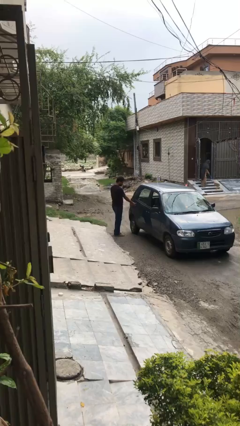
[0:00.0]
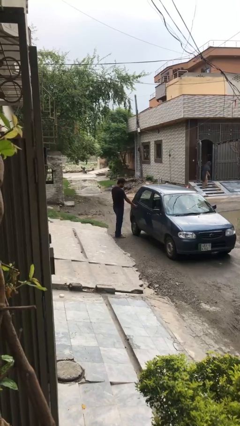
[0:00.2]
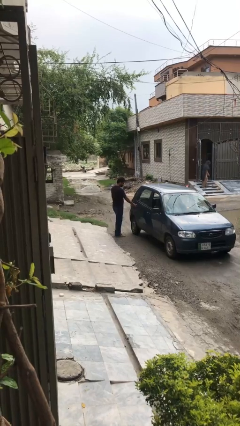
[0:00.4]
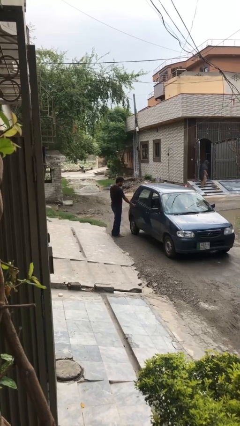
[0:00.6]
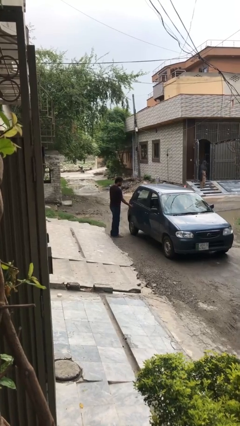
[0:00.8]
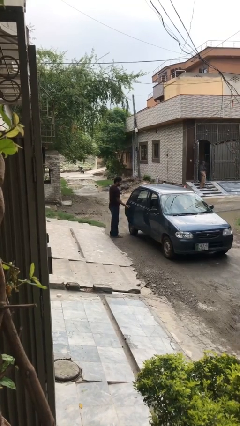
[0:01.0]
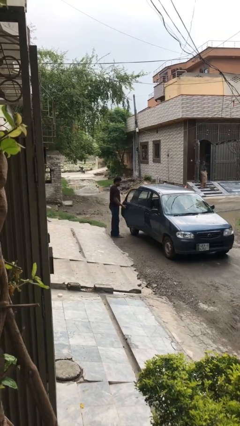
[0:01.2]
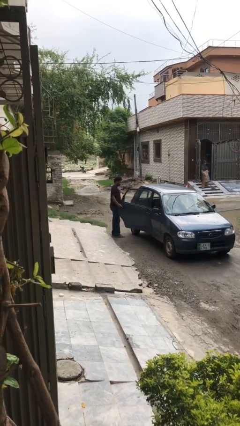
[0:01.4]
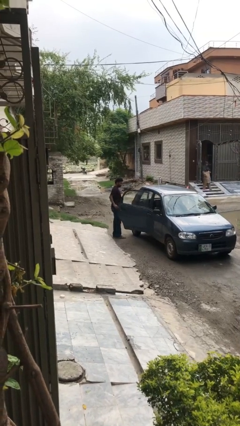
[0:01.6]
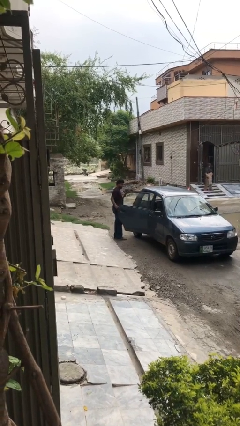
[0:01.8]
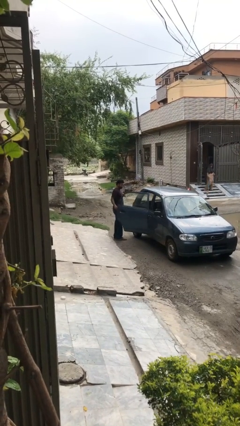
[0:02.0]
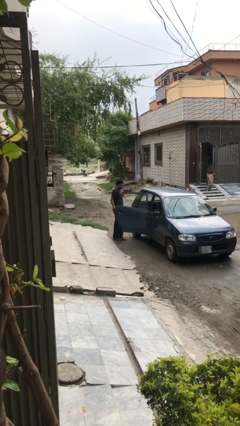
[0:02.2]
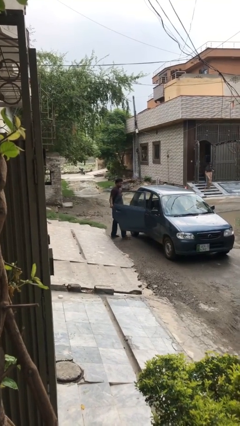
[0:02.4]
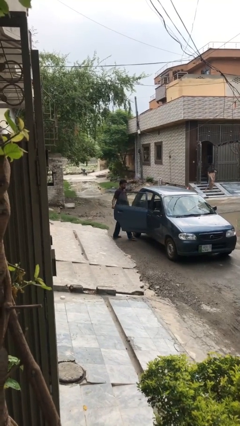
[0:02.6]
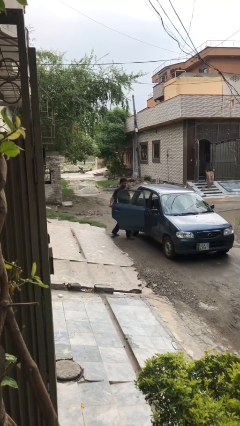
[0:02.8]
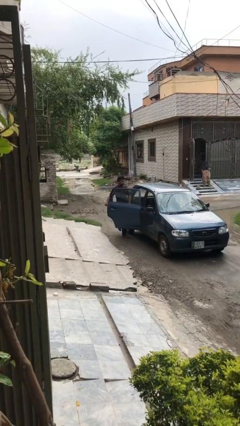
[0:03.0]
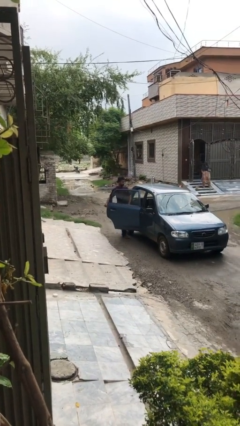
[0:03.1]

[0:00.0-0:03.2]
person opens car door

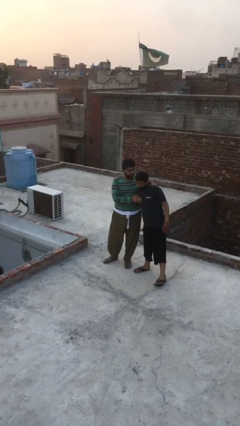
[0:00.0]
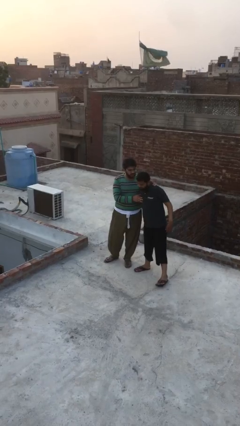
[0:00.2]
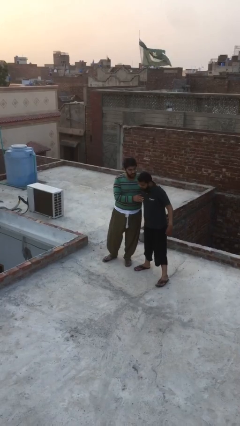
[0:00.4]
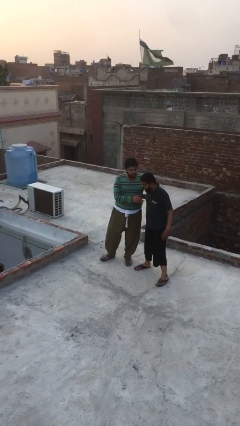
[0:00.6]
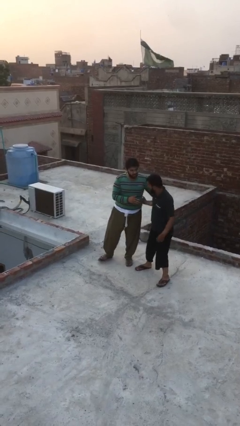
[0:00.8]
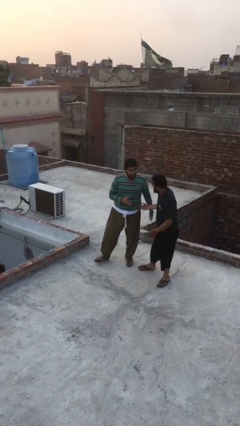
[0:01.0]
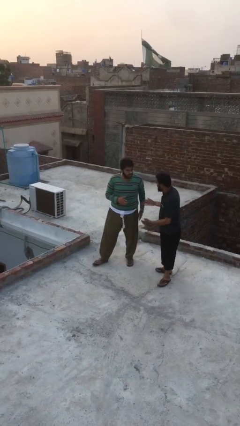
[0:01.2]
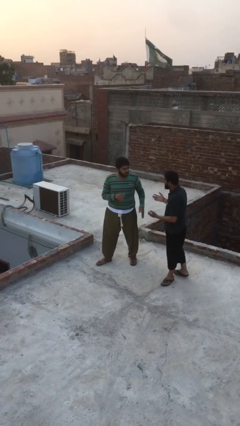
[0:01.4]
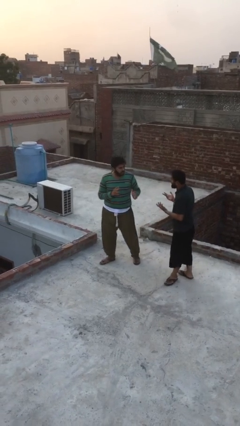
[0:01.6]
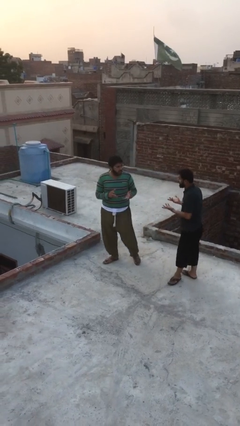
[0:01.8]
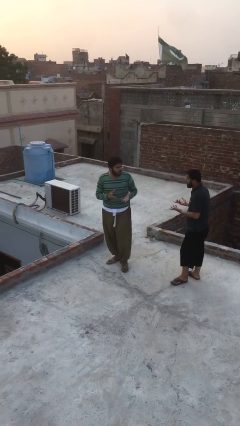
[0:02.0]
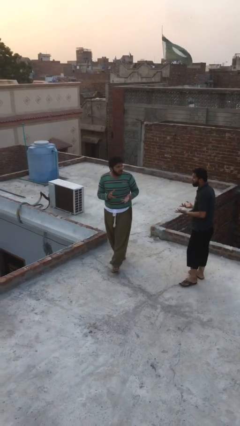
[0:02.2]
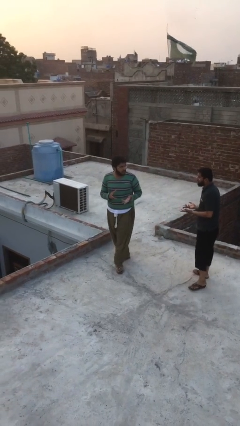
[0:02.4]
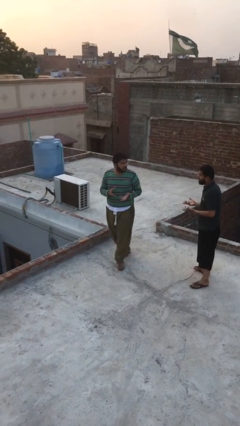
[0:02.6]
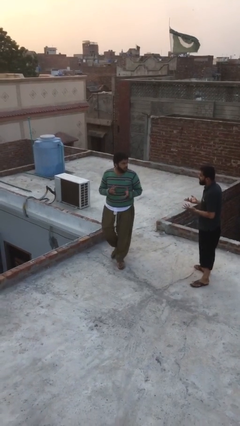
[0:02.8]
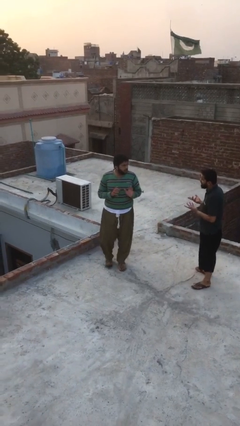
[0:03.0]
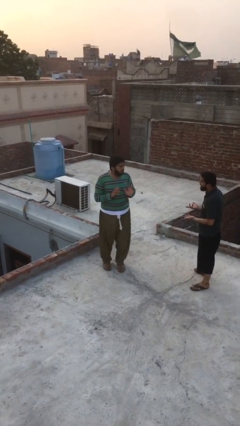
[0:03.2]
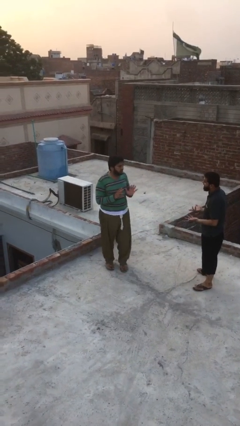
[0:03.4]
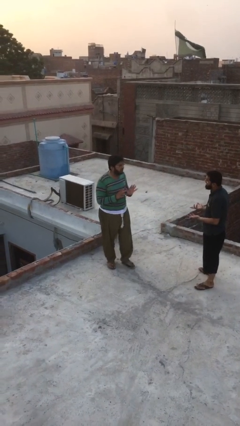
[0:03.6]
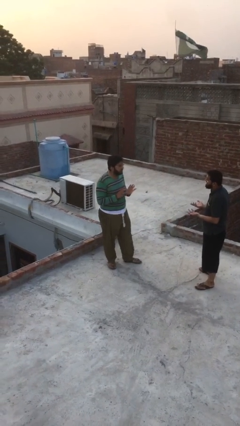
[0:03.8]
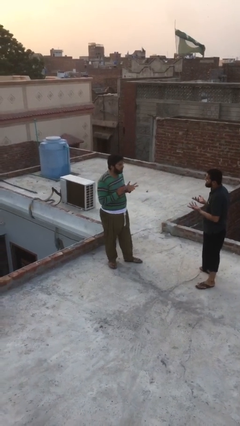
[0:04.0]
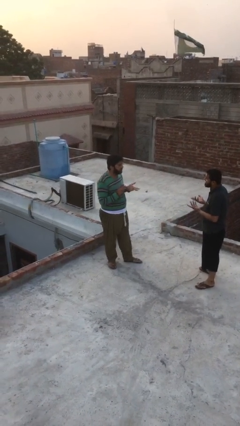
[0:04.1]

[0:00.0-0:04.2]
person talks to person

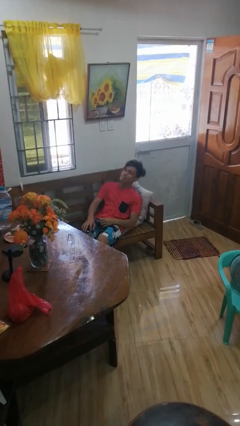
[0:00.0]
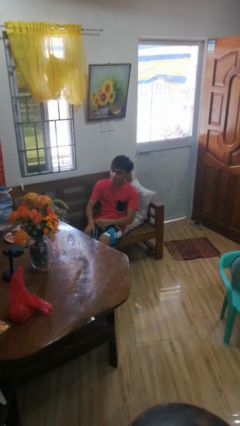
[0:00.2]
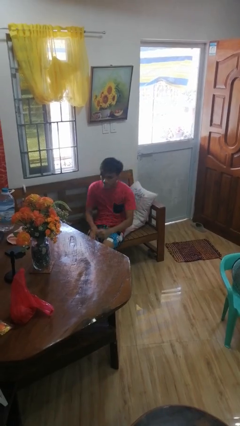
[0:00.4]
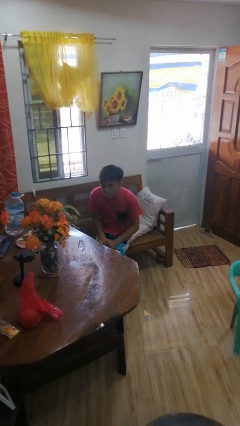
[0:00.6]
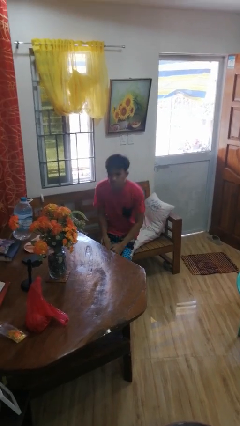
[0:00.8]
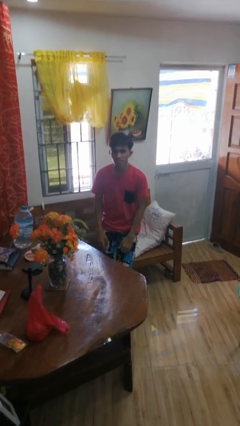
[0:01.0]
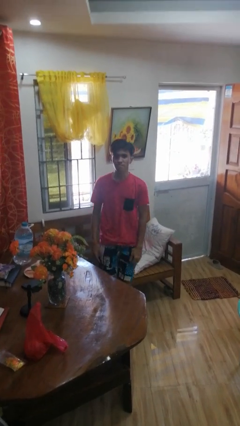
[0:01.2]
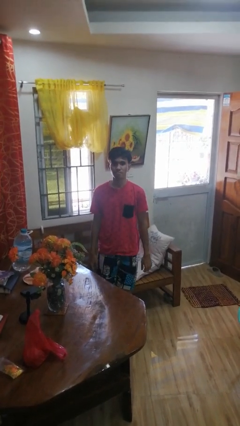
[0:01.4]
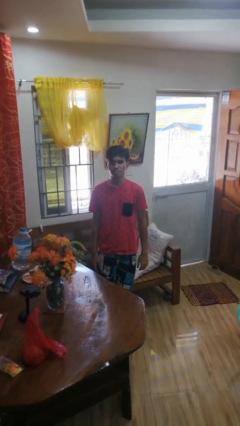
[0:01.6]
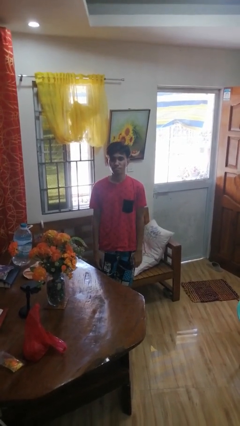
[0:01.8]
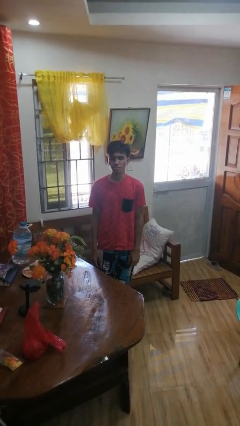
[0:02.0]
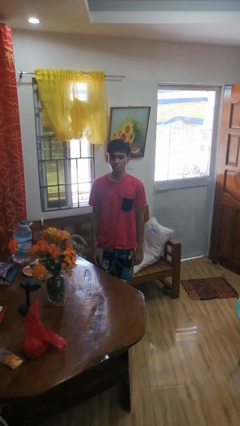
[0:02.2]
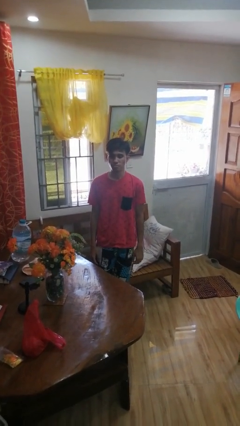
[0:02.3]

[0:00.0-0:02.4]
person stands up

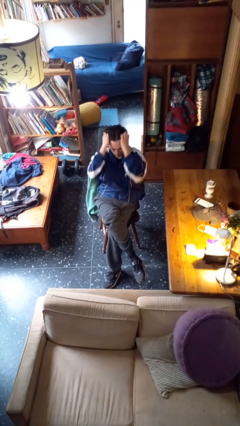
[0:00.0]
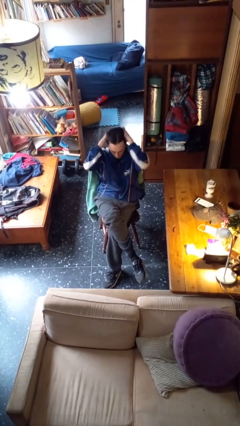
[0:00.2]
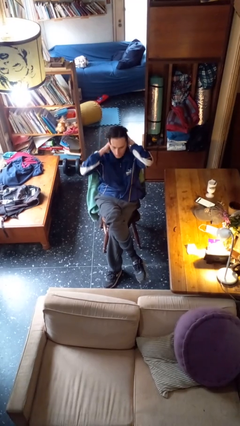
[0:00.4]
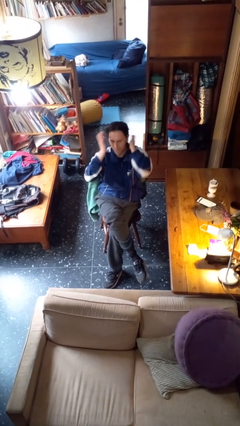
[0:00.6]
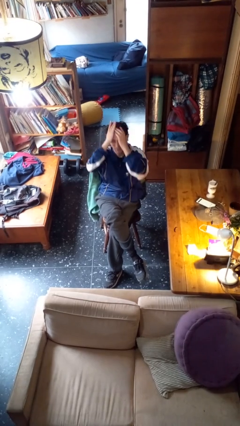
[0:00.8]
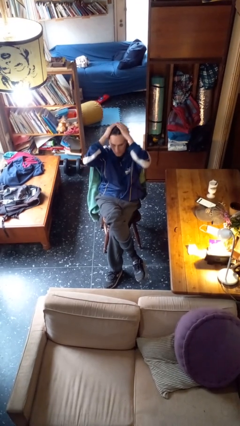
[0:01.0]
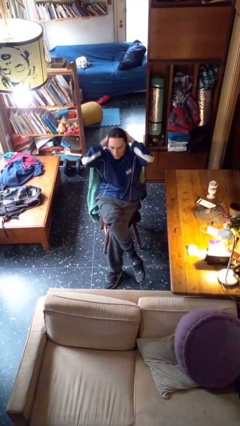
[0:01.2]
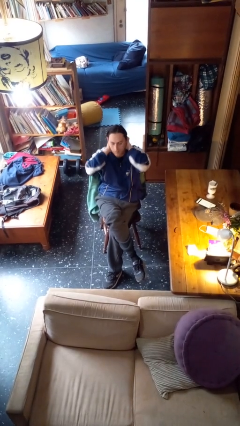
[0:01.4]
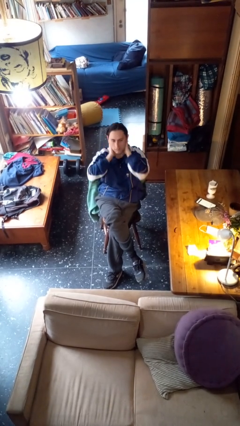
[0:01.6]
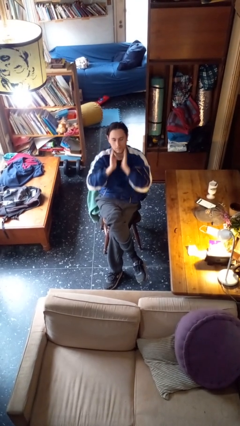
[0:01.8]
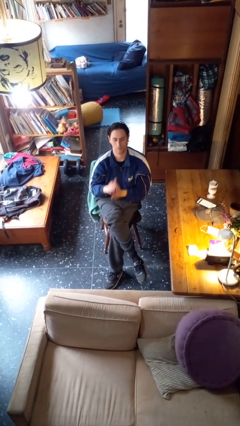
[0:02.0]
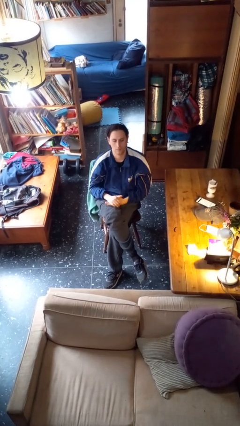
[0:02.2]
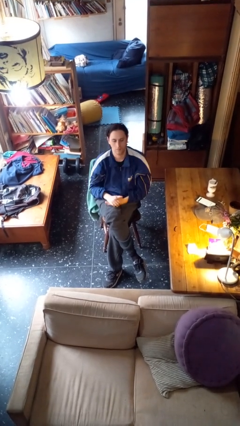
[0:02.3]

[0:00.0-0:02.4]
person strokes hair

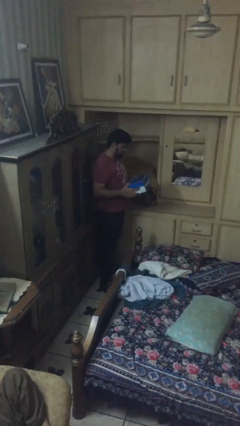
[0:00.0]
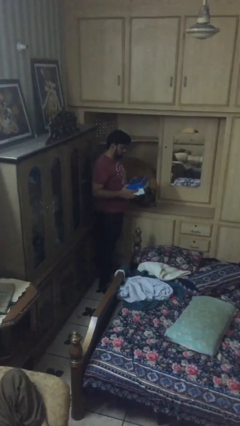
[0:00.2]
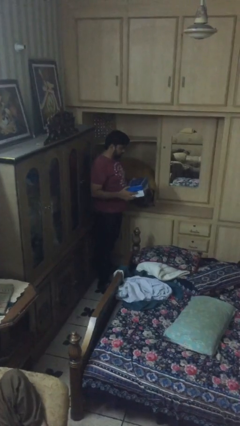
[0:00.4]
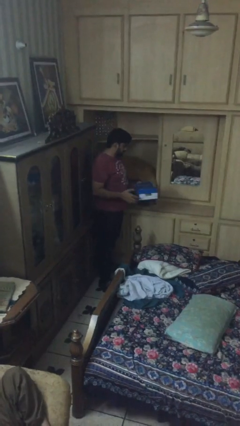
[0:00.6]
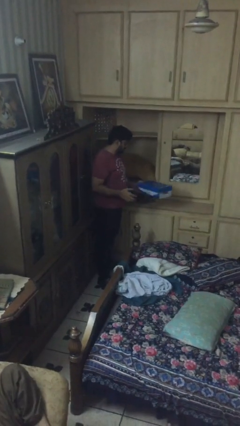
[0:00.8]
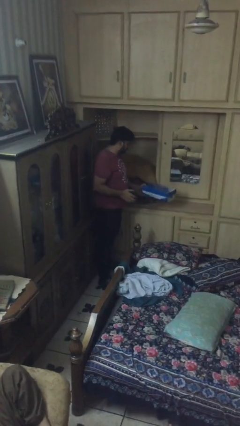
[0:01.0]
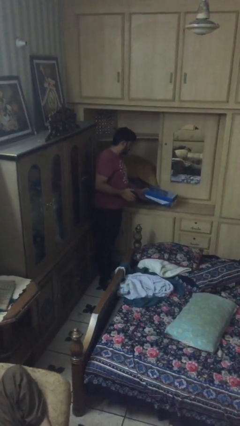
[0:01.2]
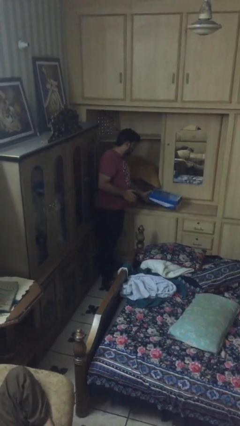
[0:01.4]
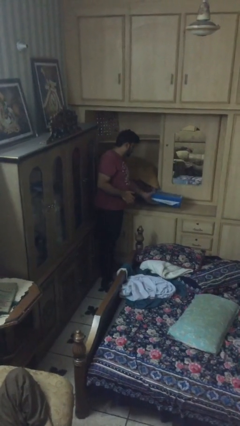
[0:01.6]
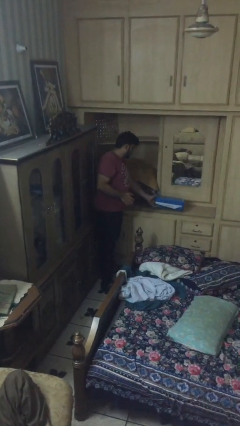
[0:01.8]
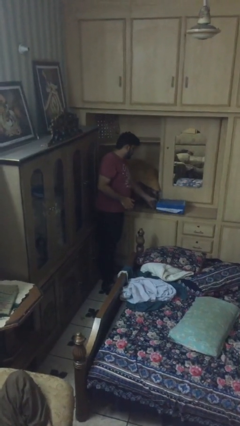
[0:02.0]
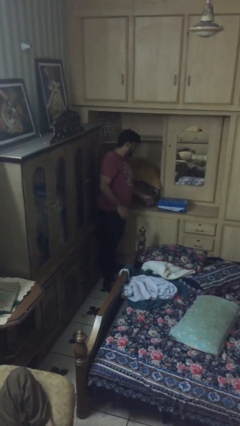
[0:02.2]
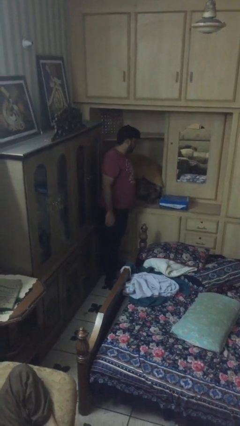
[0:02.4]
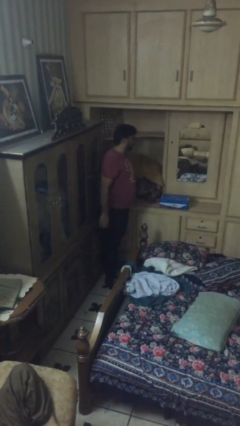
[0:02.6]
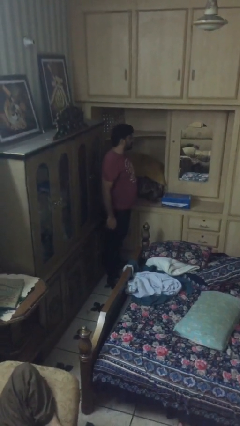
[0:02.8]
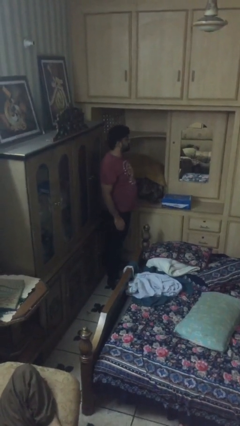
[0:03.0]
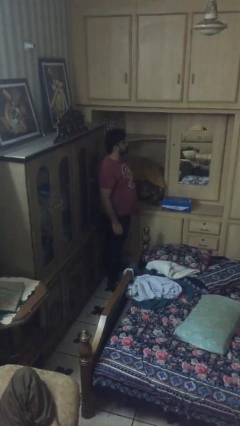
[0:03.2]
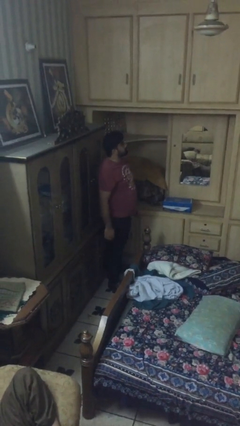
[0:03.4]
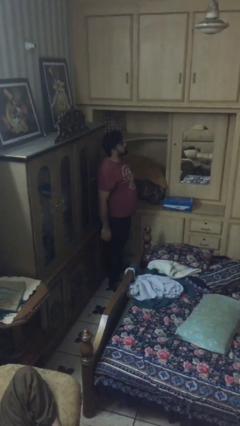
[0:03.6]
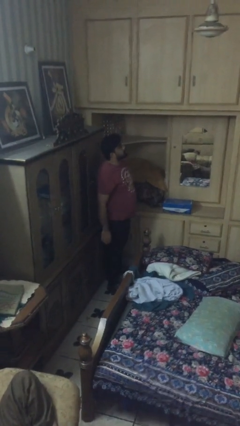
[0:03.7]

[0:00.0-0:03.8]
person puts down object on table

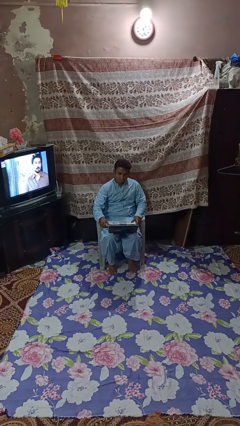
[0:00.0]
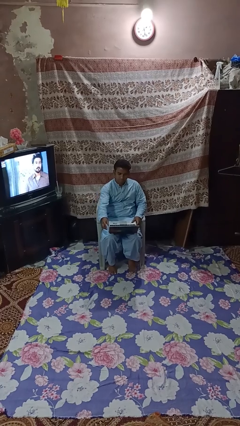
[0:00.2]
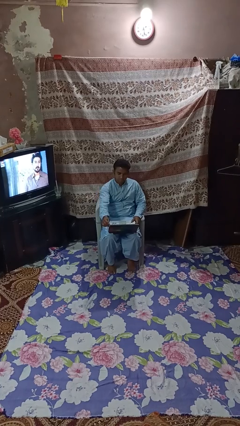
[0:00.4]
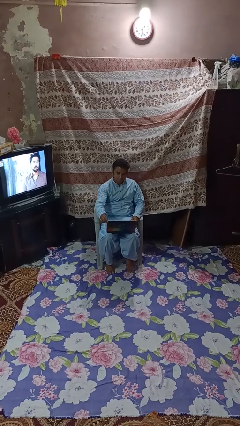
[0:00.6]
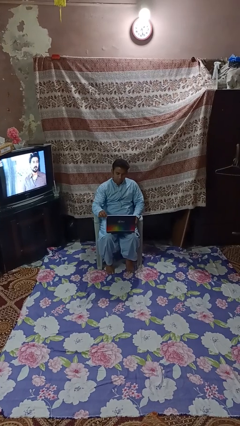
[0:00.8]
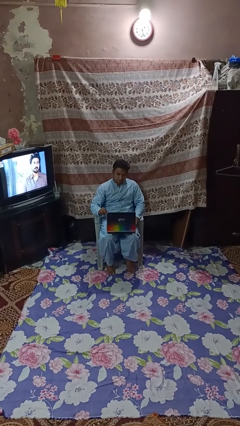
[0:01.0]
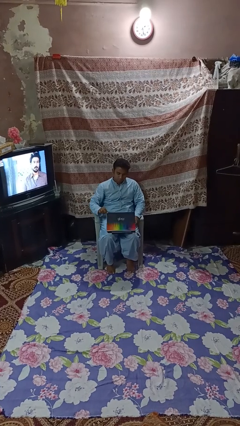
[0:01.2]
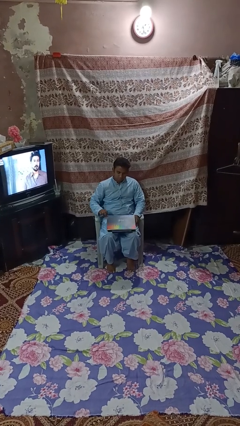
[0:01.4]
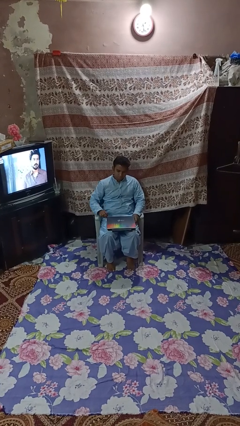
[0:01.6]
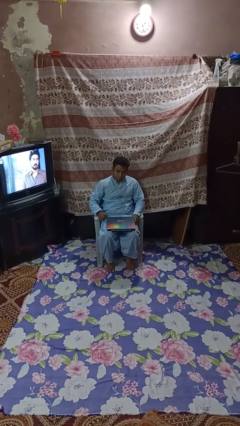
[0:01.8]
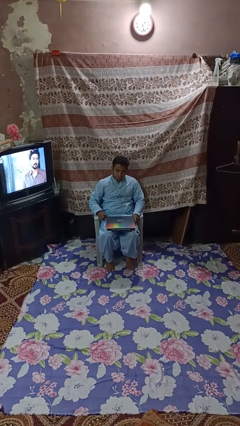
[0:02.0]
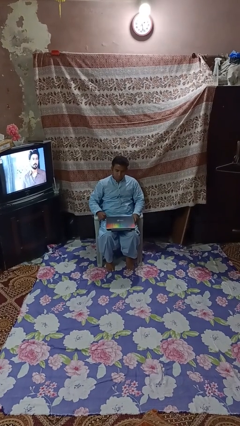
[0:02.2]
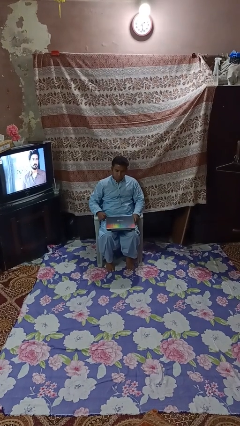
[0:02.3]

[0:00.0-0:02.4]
person closes laptop
